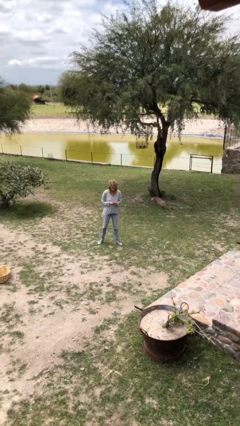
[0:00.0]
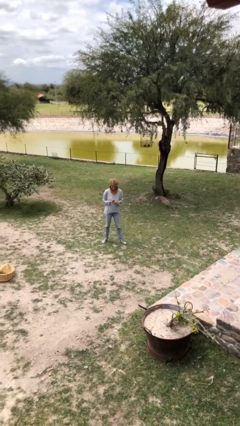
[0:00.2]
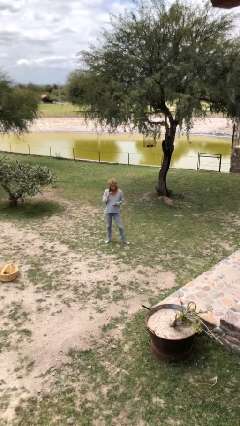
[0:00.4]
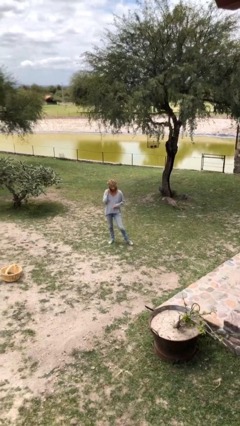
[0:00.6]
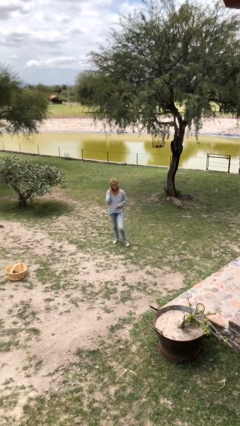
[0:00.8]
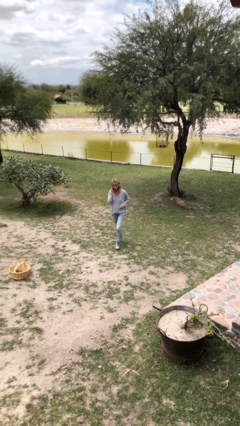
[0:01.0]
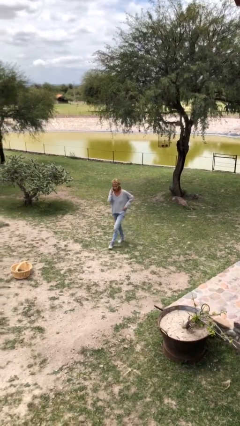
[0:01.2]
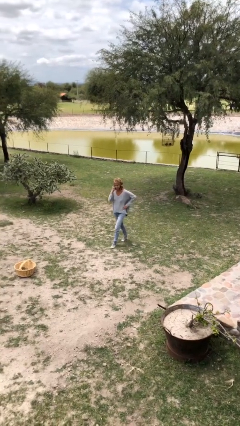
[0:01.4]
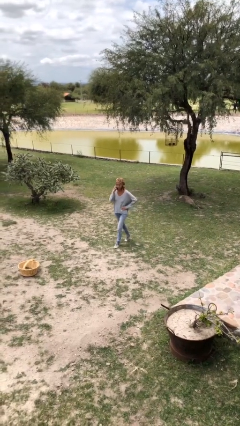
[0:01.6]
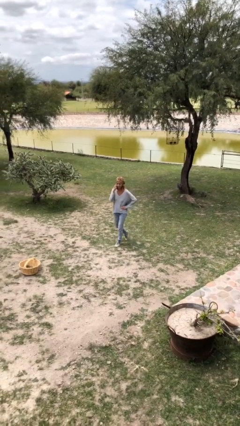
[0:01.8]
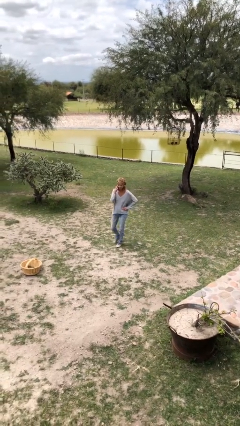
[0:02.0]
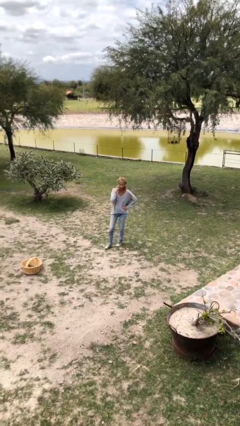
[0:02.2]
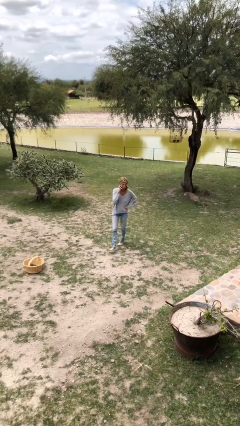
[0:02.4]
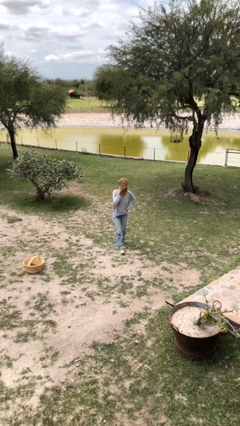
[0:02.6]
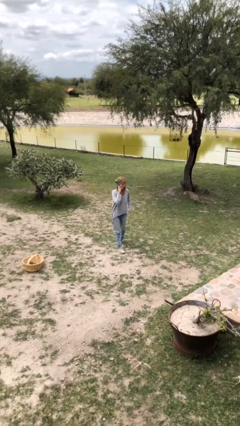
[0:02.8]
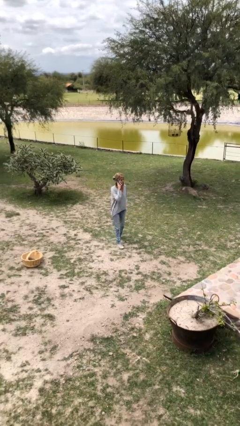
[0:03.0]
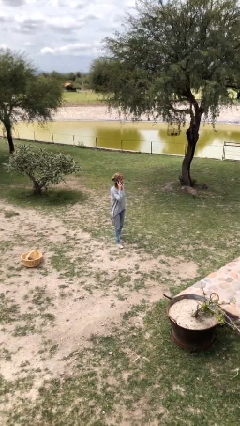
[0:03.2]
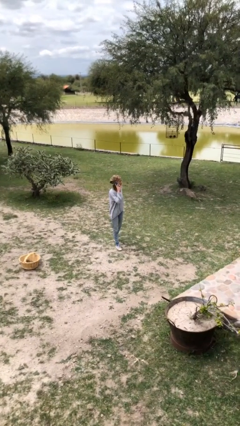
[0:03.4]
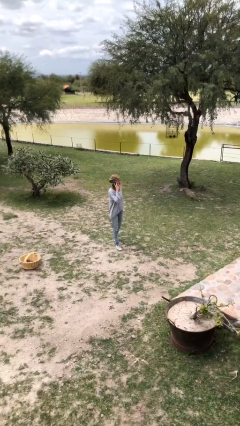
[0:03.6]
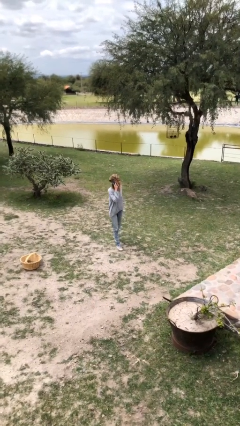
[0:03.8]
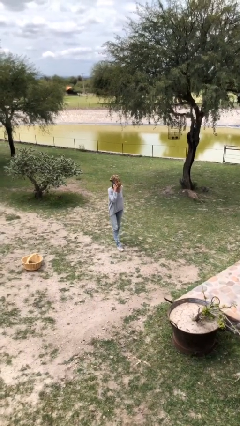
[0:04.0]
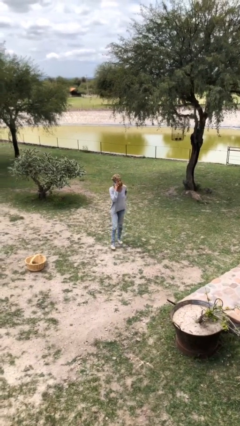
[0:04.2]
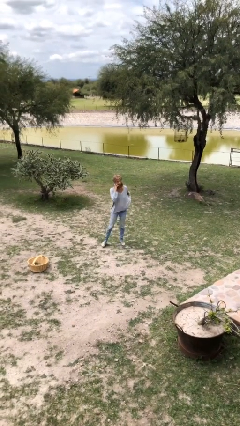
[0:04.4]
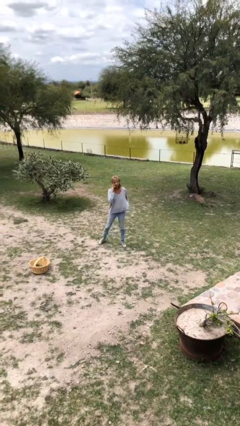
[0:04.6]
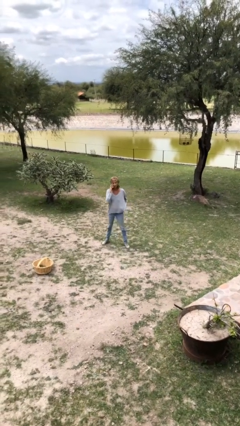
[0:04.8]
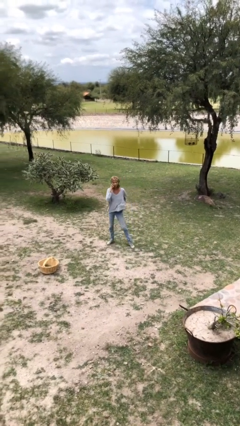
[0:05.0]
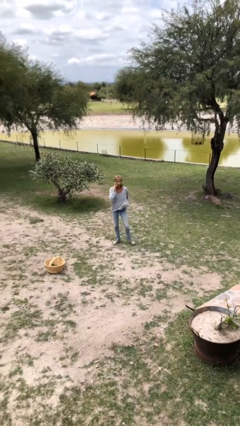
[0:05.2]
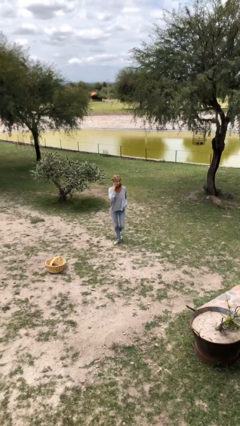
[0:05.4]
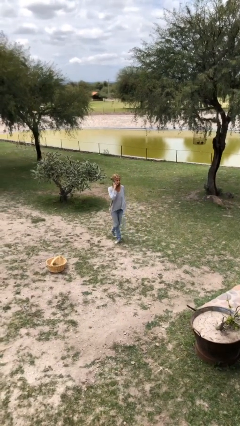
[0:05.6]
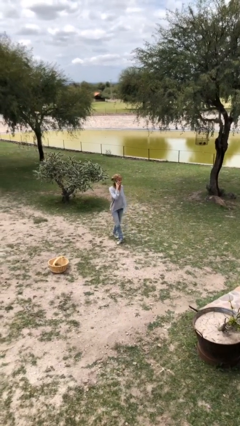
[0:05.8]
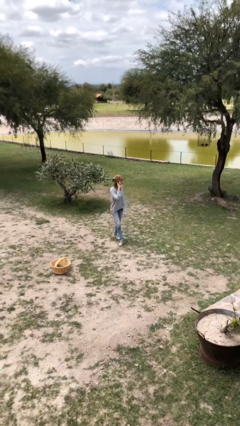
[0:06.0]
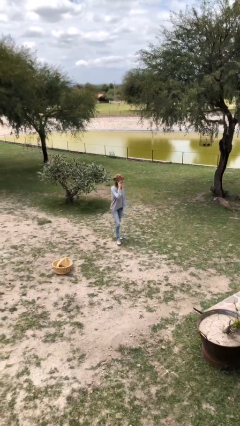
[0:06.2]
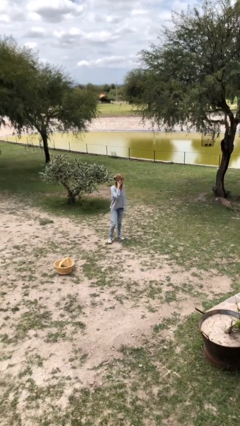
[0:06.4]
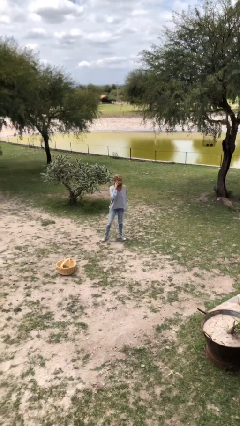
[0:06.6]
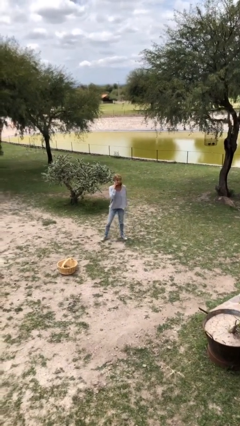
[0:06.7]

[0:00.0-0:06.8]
person talks on phone

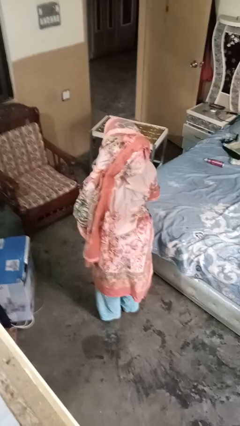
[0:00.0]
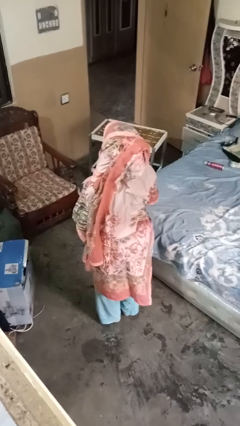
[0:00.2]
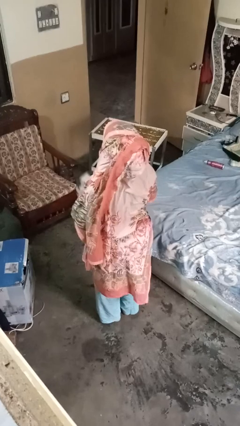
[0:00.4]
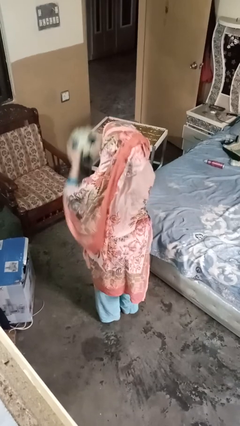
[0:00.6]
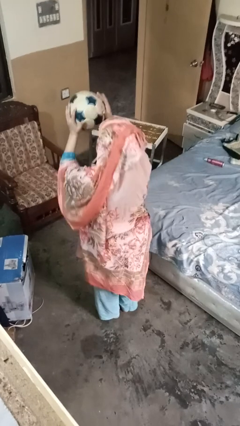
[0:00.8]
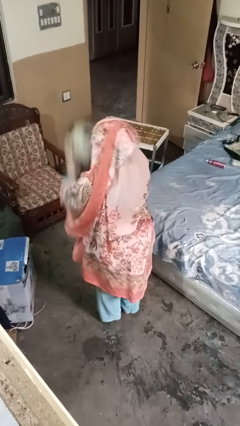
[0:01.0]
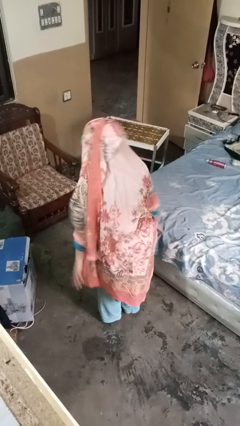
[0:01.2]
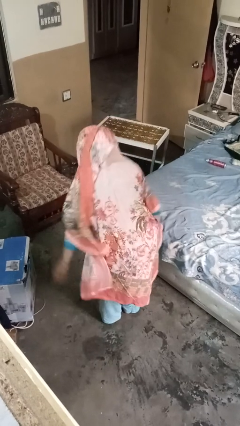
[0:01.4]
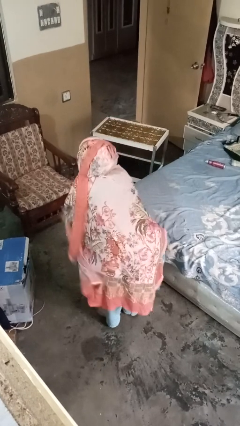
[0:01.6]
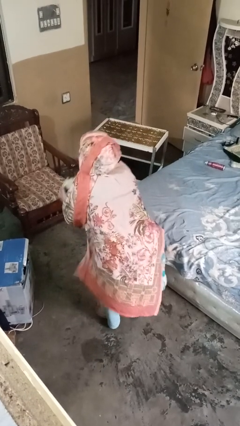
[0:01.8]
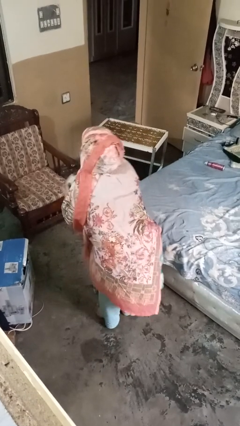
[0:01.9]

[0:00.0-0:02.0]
person bounces ball on floor

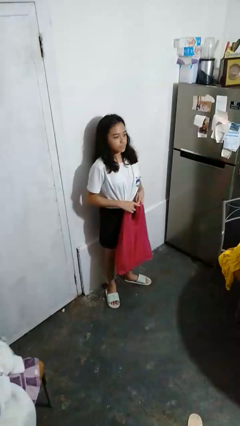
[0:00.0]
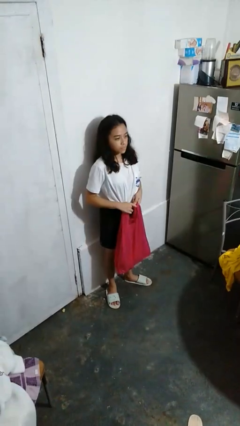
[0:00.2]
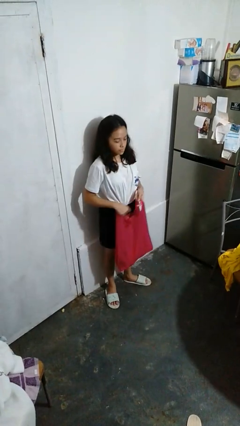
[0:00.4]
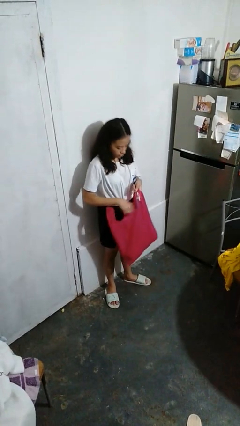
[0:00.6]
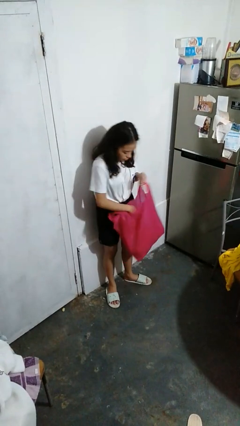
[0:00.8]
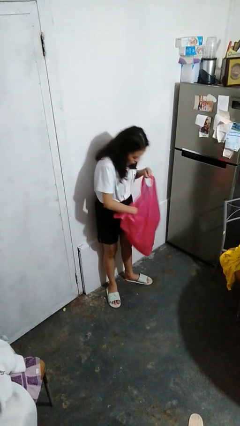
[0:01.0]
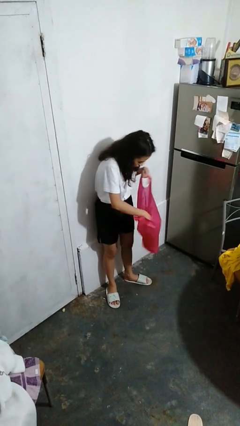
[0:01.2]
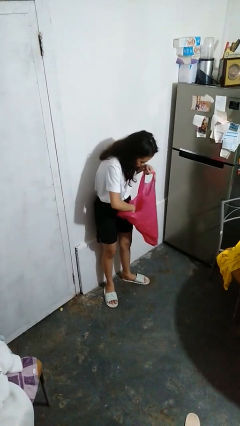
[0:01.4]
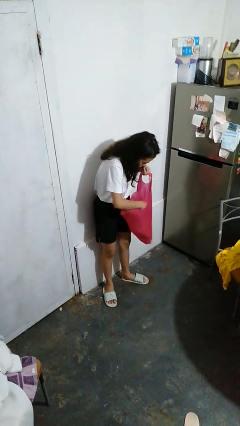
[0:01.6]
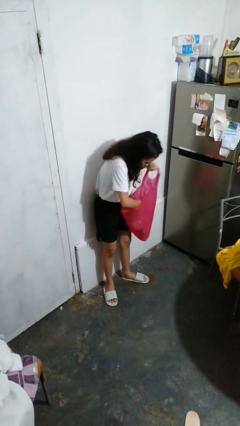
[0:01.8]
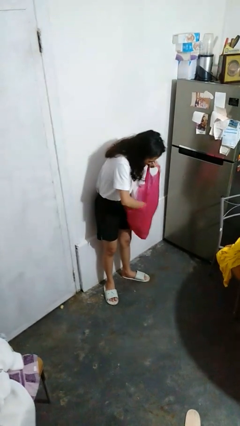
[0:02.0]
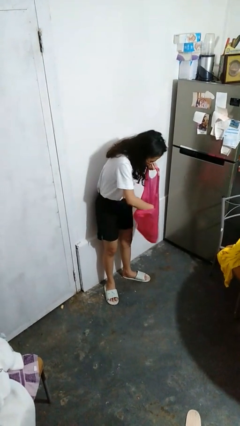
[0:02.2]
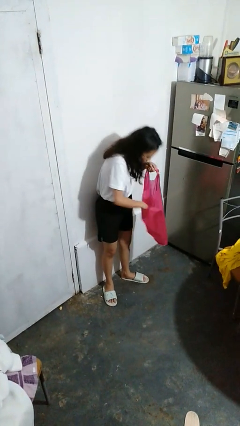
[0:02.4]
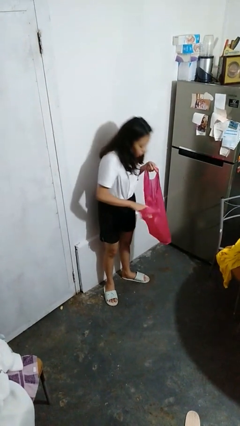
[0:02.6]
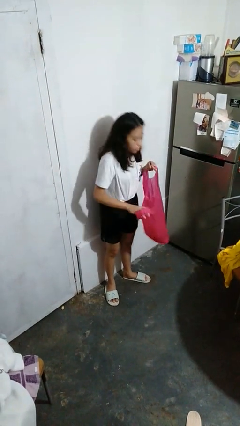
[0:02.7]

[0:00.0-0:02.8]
person searches in bag

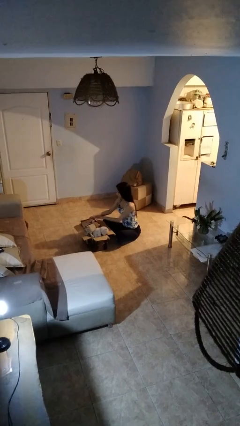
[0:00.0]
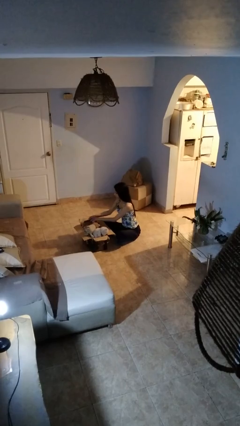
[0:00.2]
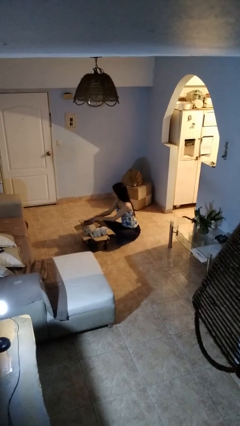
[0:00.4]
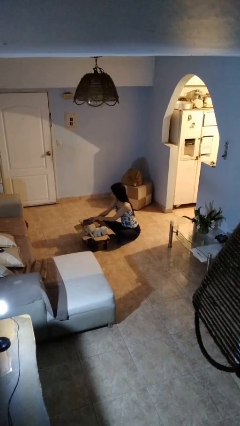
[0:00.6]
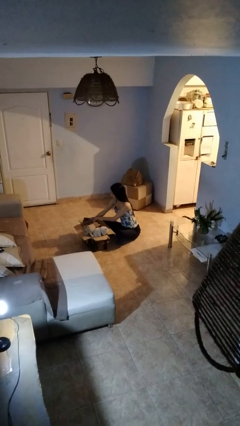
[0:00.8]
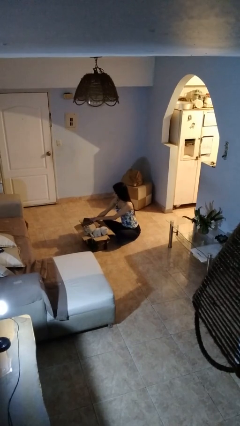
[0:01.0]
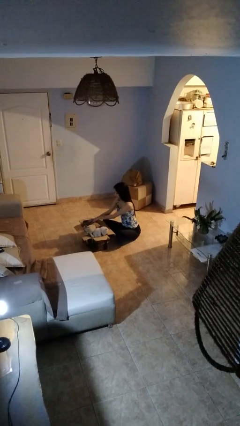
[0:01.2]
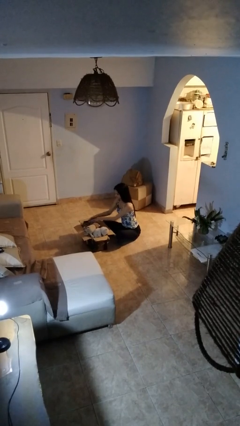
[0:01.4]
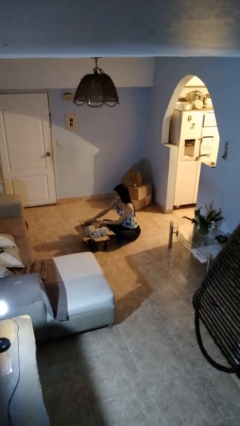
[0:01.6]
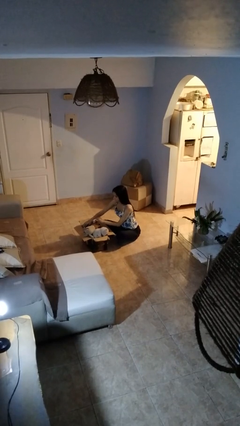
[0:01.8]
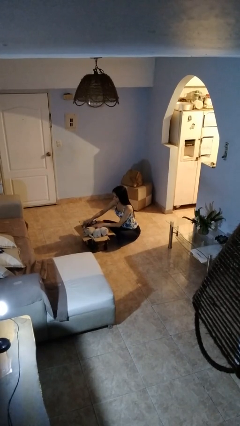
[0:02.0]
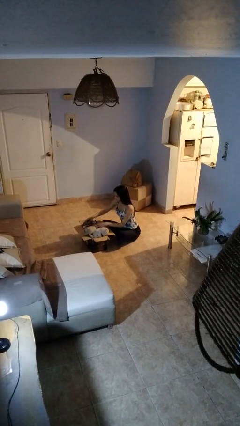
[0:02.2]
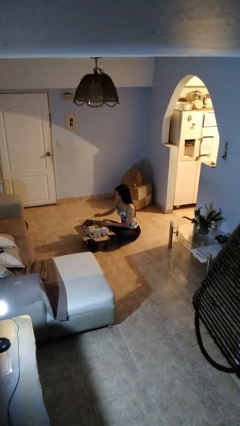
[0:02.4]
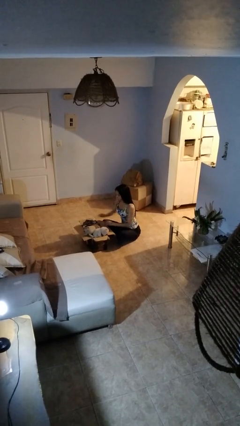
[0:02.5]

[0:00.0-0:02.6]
person searches in box

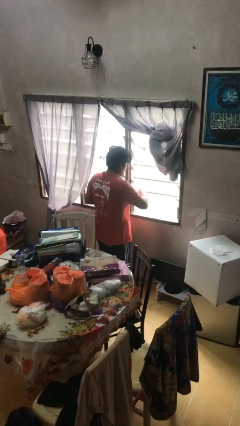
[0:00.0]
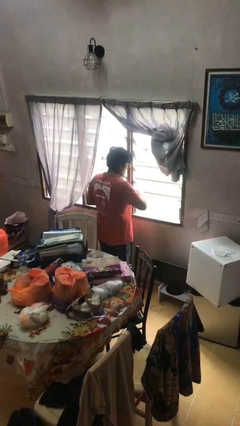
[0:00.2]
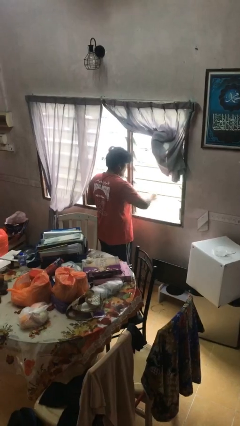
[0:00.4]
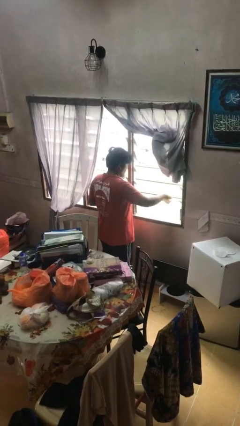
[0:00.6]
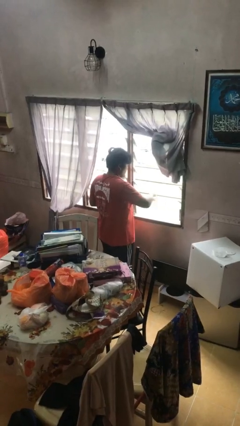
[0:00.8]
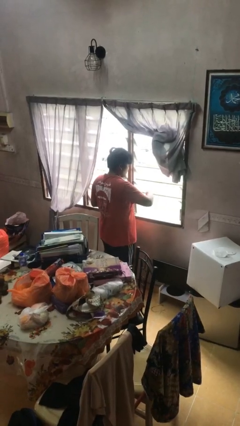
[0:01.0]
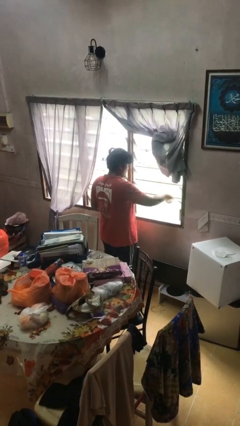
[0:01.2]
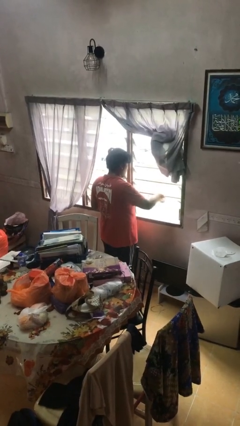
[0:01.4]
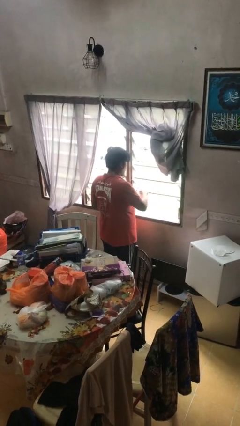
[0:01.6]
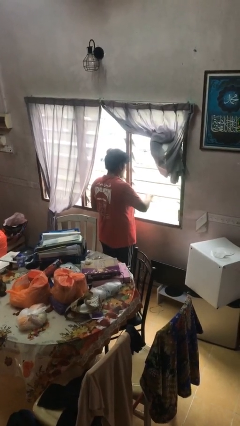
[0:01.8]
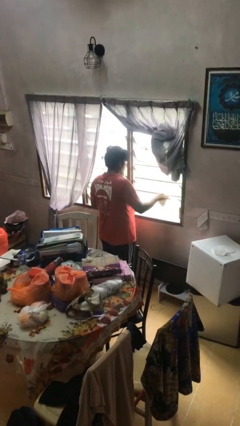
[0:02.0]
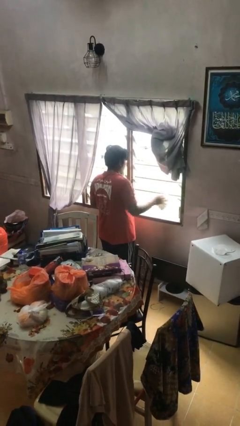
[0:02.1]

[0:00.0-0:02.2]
person washes window

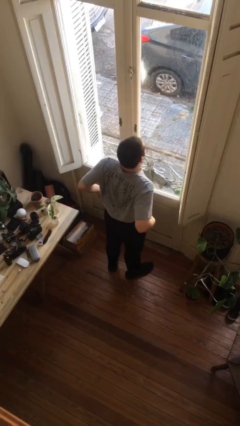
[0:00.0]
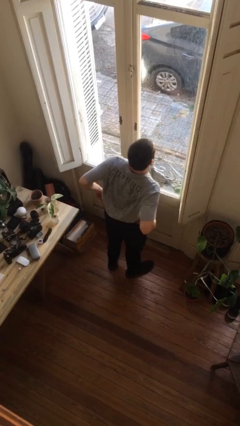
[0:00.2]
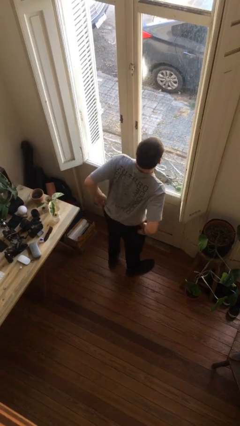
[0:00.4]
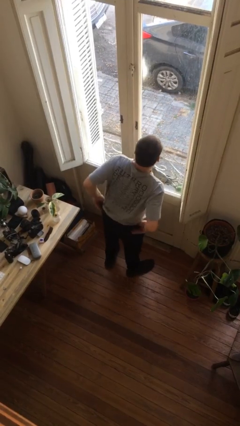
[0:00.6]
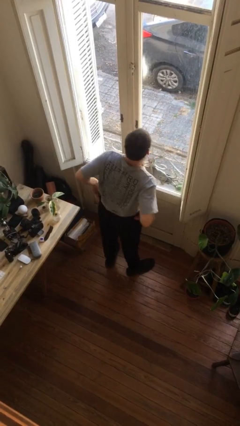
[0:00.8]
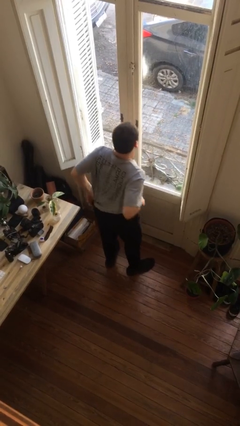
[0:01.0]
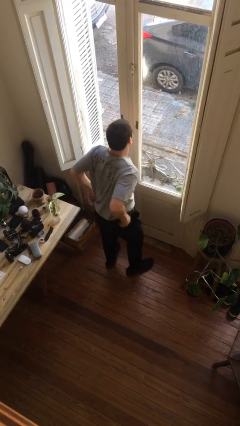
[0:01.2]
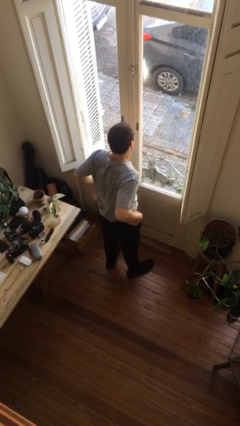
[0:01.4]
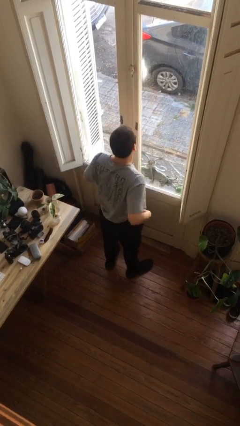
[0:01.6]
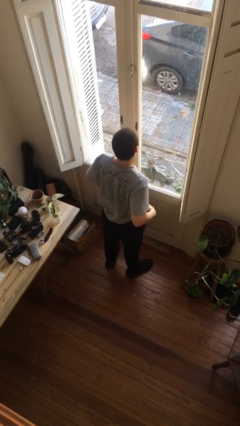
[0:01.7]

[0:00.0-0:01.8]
person hikes up pants
